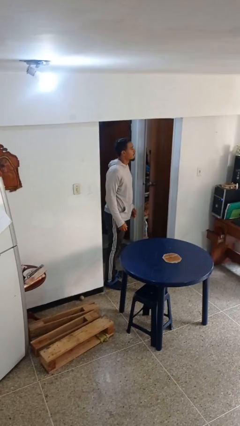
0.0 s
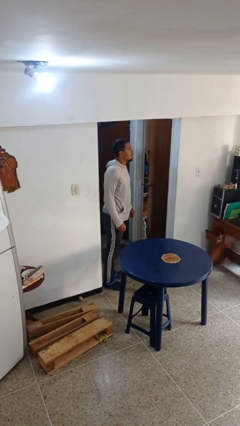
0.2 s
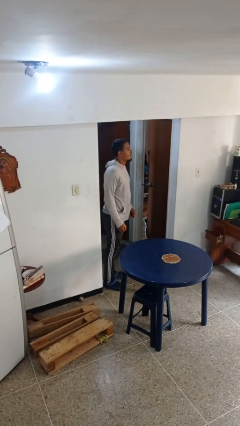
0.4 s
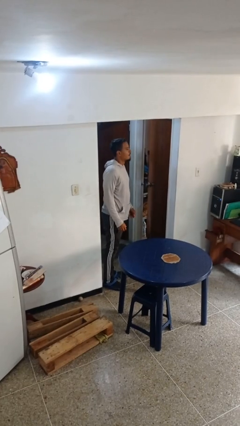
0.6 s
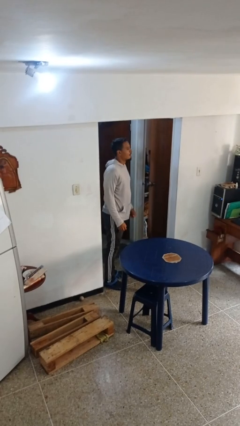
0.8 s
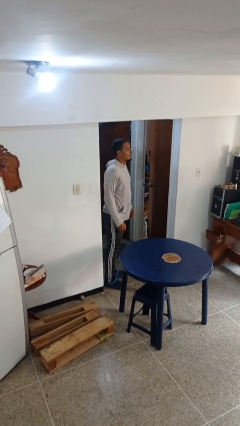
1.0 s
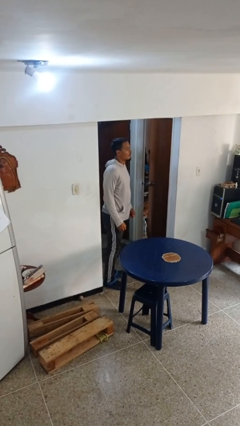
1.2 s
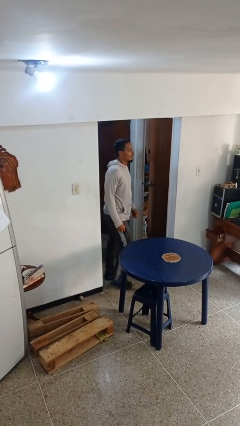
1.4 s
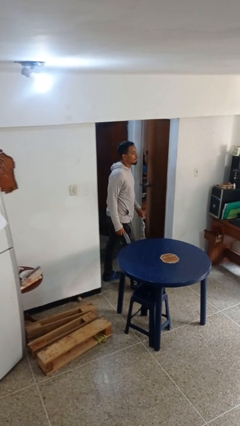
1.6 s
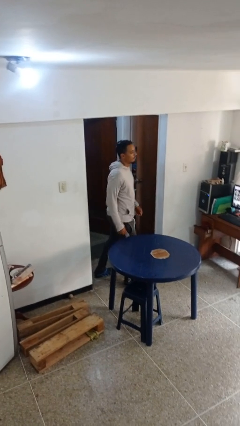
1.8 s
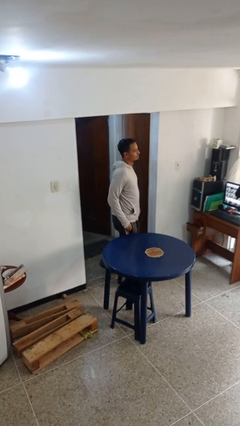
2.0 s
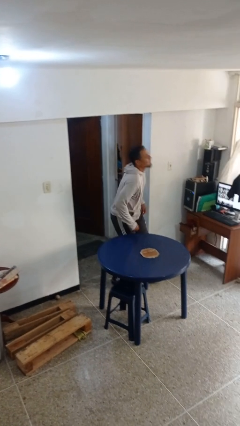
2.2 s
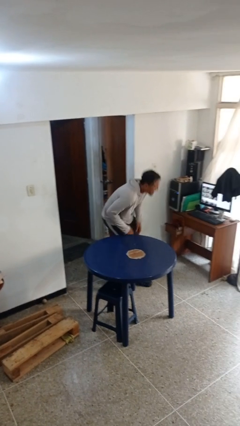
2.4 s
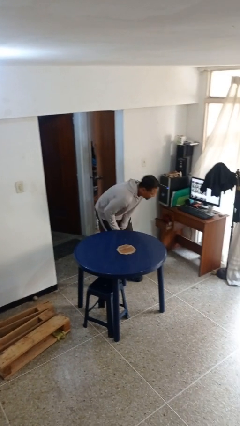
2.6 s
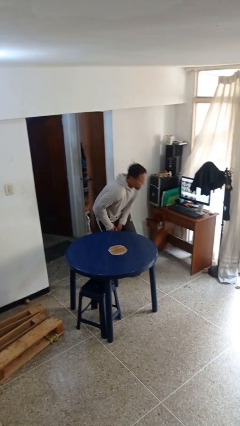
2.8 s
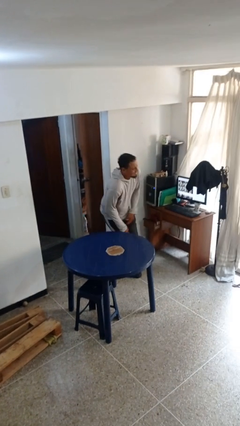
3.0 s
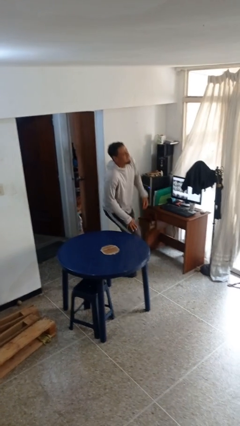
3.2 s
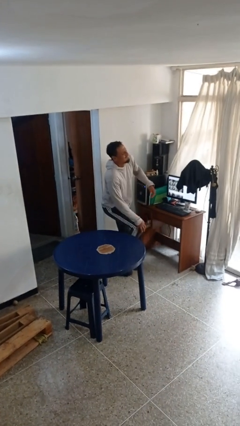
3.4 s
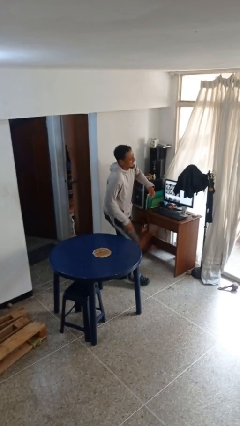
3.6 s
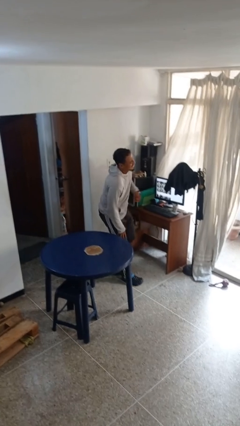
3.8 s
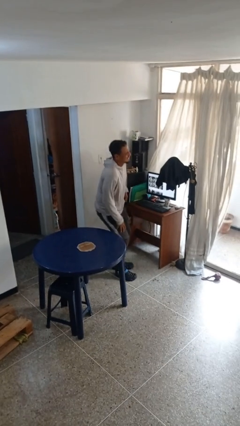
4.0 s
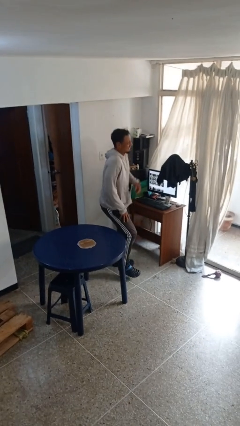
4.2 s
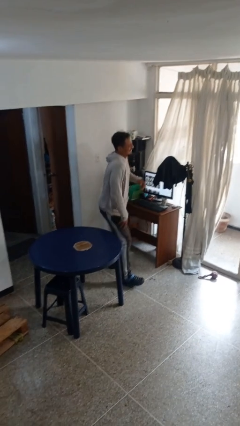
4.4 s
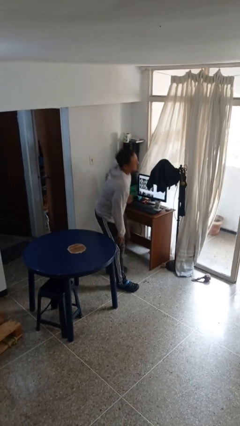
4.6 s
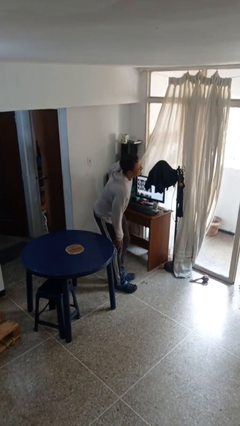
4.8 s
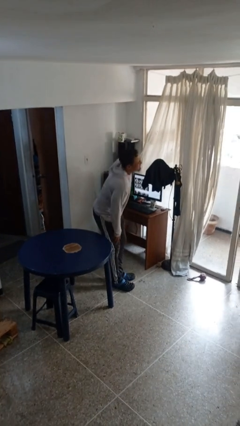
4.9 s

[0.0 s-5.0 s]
person bumps into table

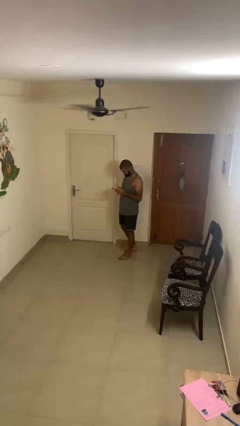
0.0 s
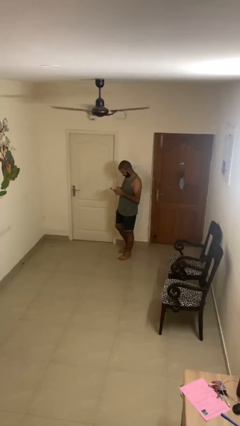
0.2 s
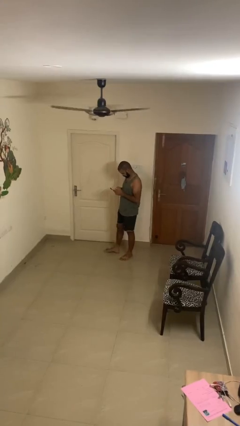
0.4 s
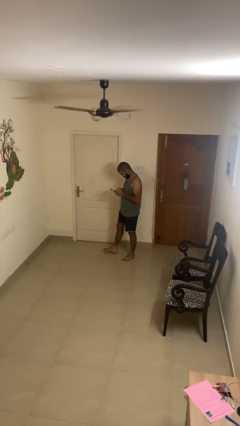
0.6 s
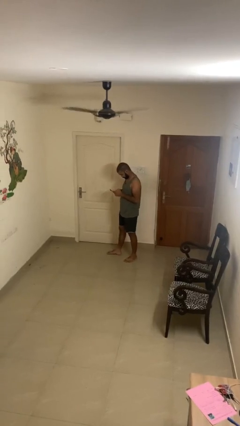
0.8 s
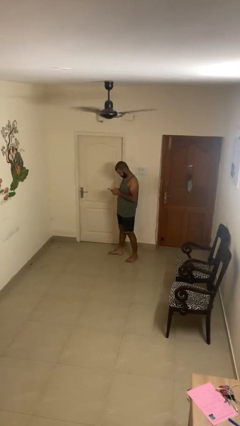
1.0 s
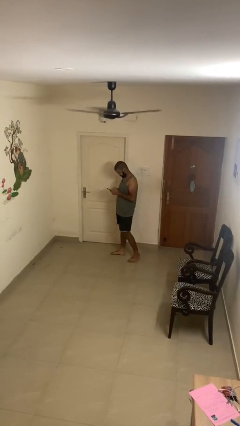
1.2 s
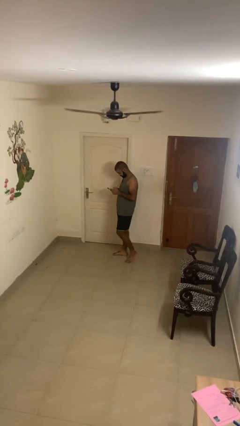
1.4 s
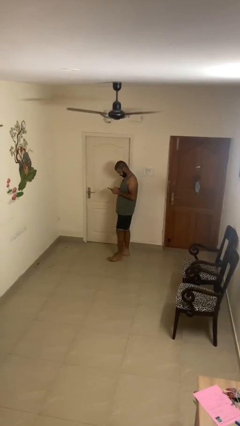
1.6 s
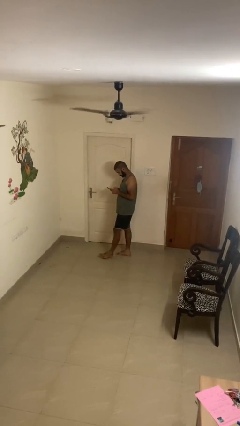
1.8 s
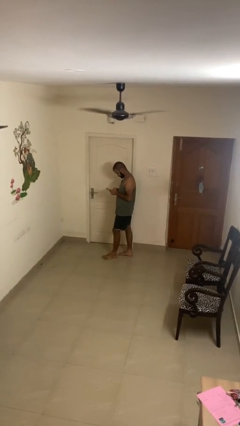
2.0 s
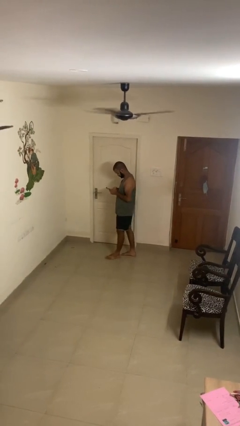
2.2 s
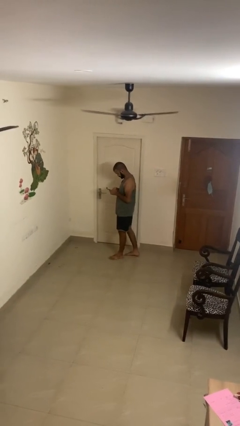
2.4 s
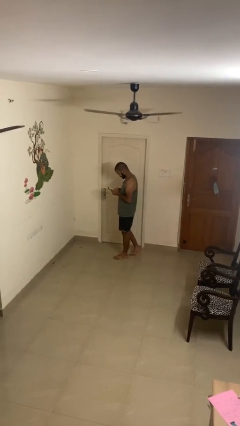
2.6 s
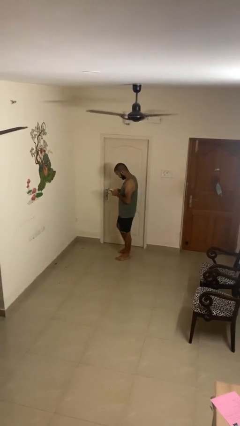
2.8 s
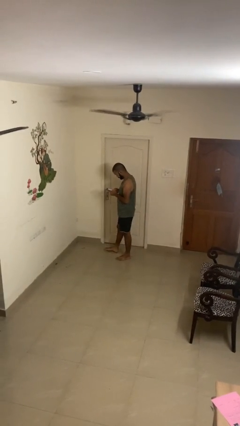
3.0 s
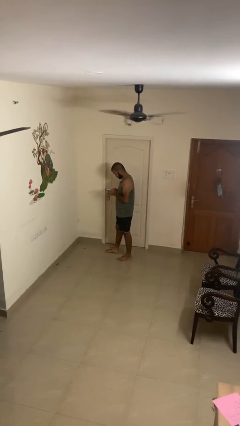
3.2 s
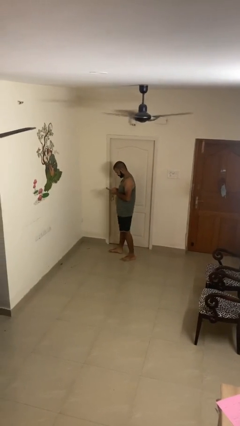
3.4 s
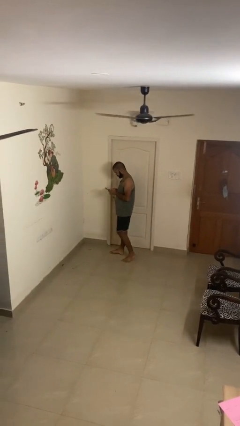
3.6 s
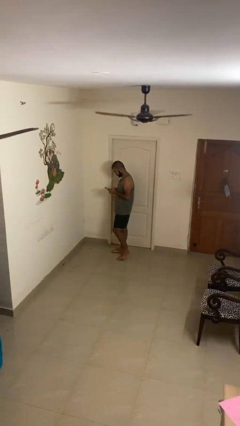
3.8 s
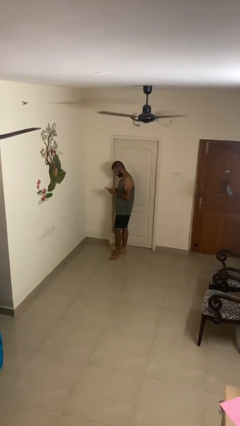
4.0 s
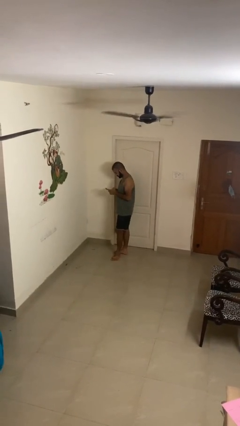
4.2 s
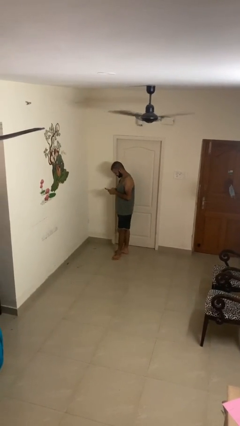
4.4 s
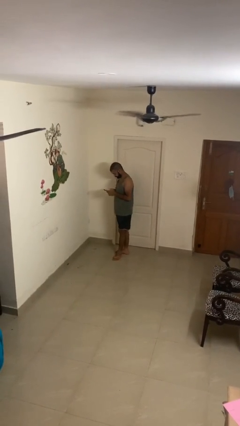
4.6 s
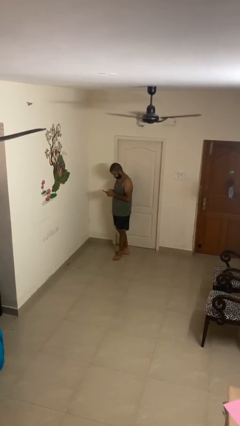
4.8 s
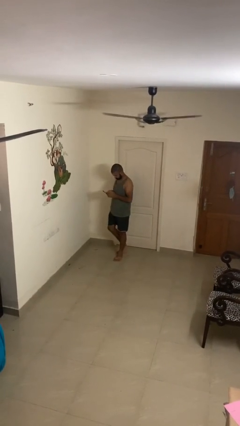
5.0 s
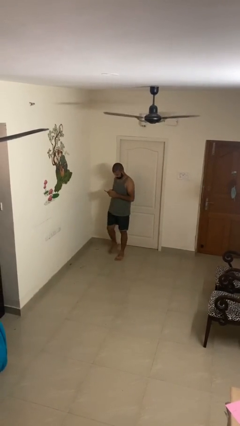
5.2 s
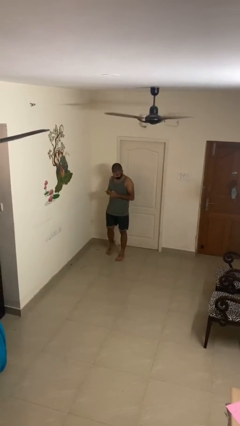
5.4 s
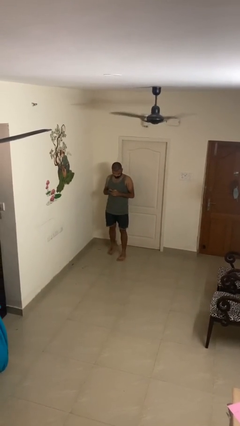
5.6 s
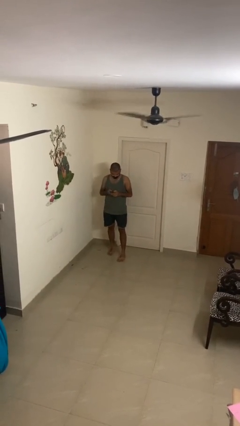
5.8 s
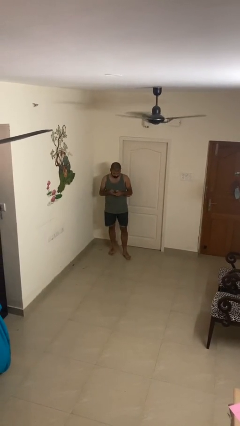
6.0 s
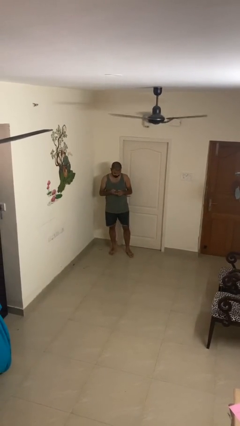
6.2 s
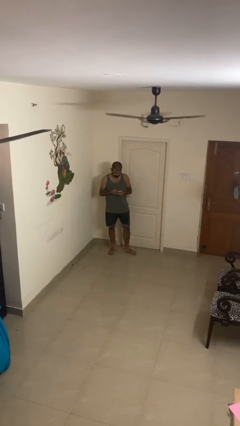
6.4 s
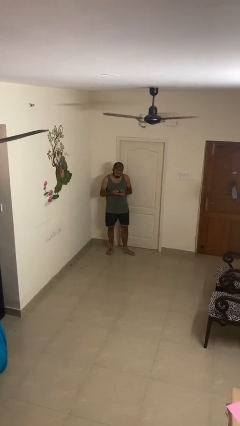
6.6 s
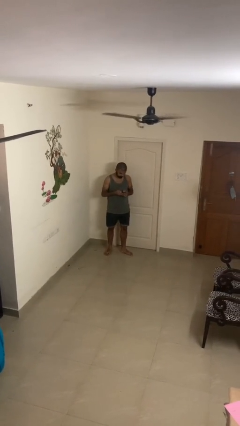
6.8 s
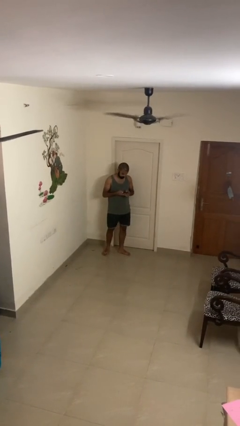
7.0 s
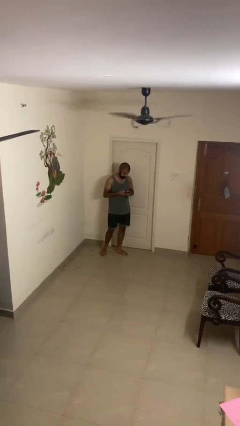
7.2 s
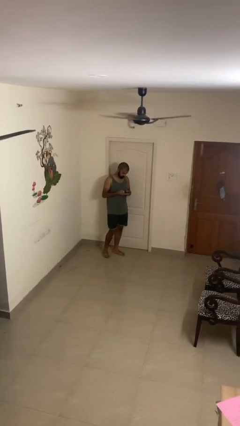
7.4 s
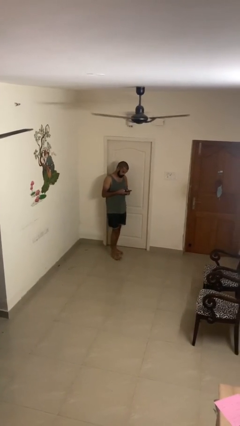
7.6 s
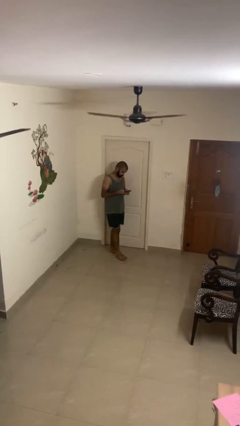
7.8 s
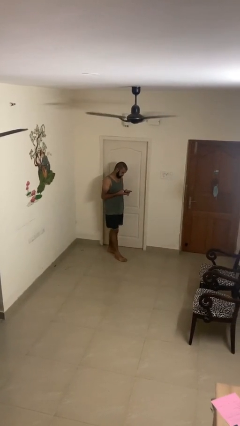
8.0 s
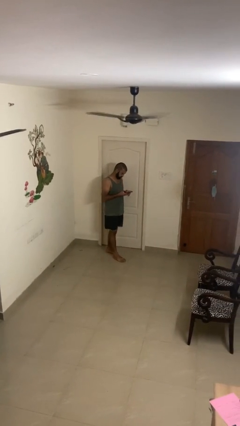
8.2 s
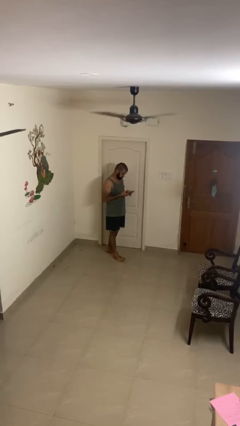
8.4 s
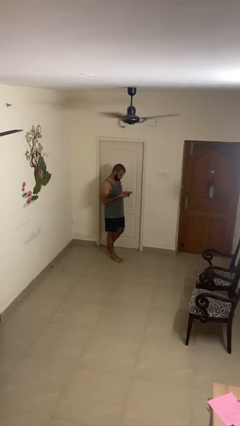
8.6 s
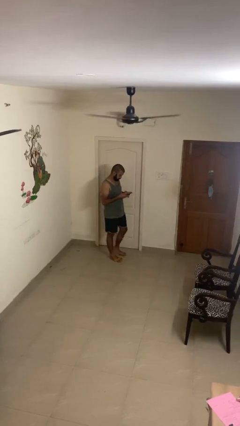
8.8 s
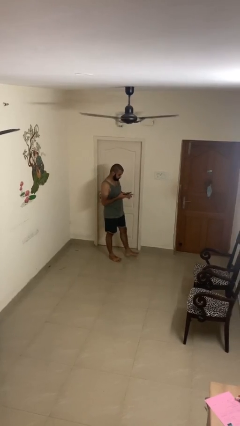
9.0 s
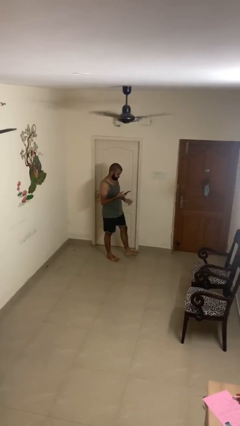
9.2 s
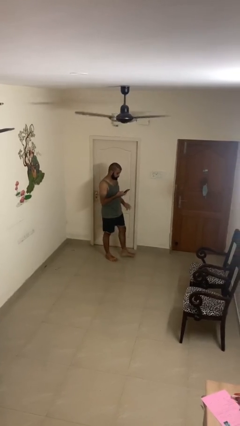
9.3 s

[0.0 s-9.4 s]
person texts on phone

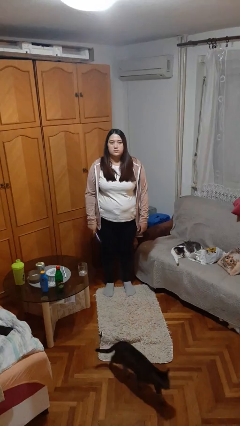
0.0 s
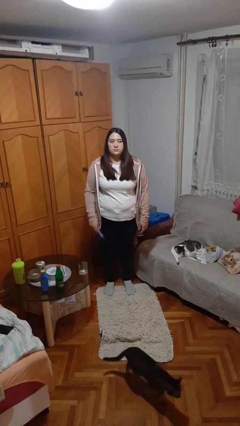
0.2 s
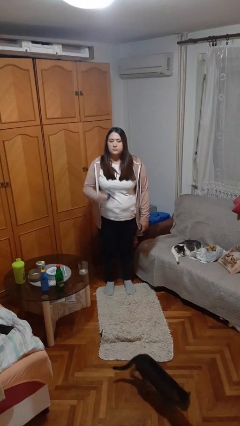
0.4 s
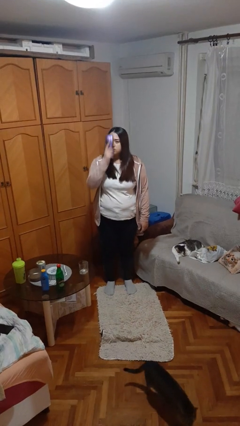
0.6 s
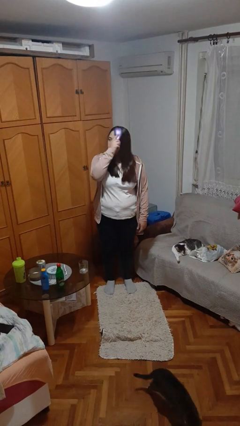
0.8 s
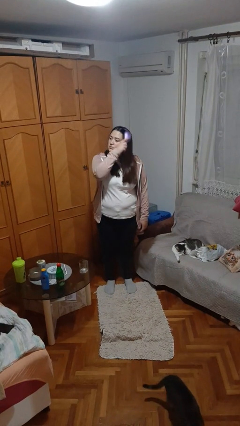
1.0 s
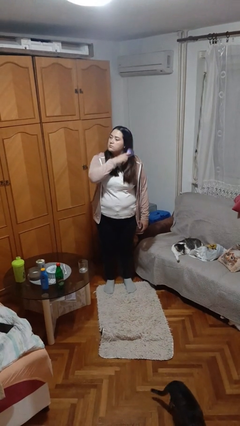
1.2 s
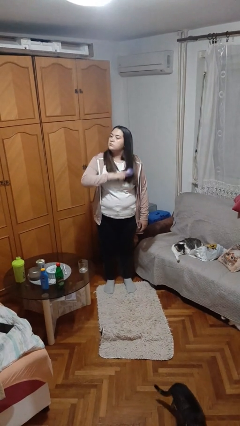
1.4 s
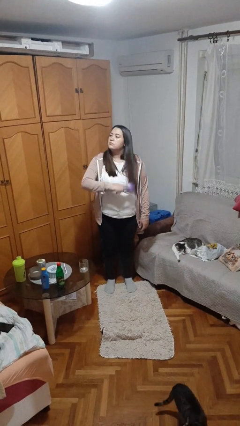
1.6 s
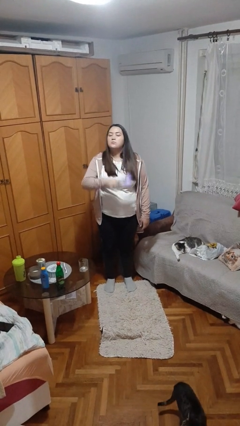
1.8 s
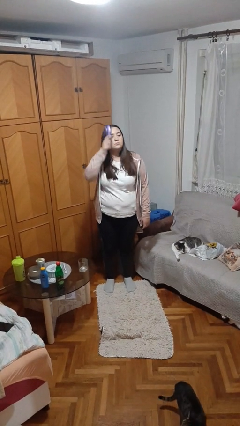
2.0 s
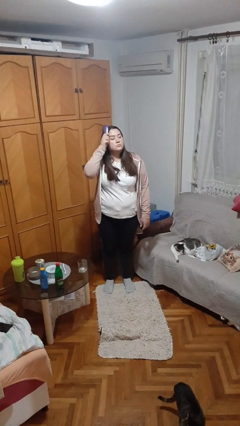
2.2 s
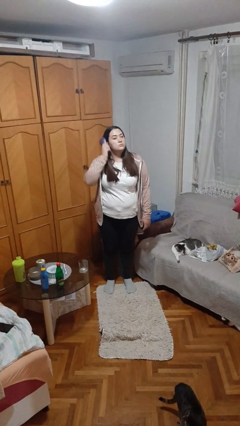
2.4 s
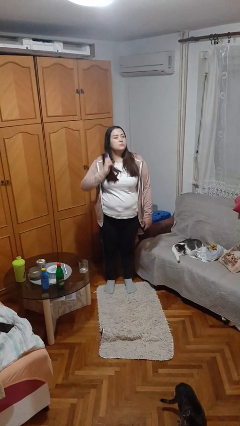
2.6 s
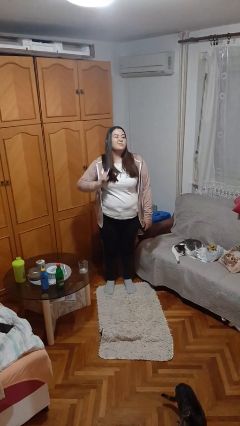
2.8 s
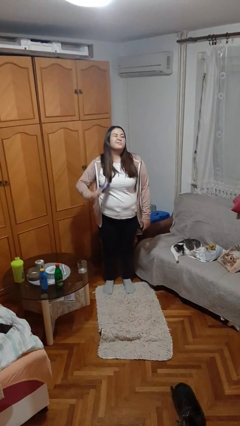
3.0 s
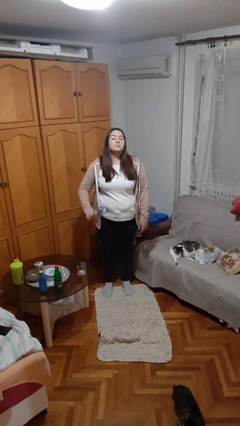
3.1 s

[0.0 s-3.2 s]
person brushes hair
